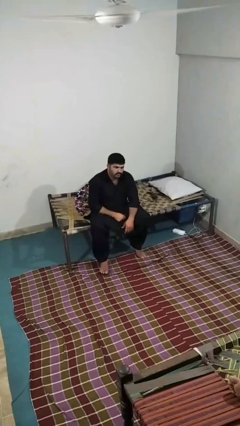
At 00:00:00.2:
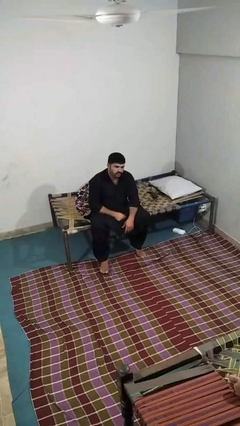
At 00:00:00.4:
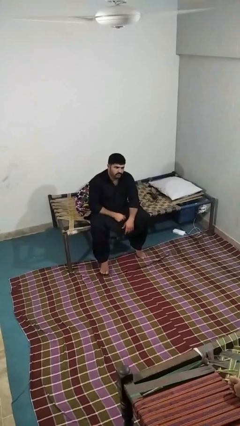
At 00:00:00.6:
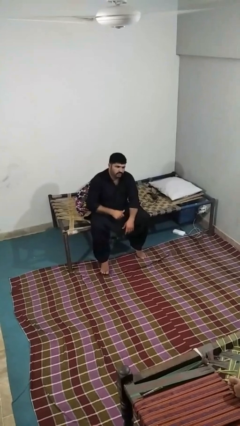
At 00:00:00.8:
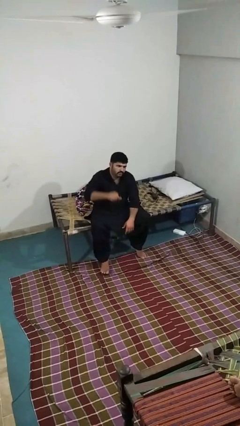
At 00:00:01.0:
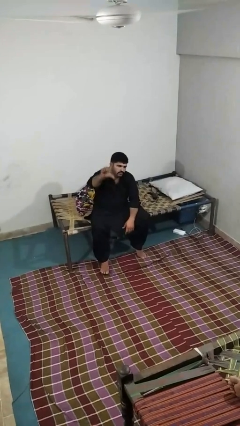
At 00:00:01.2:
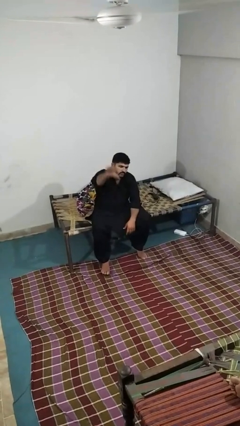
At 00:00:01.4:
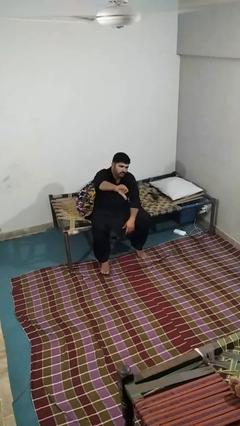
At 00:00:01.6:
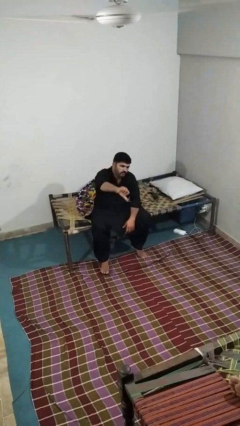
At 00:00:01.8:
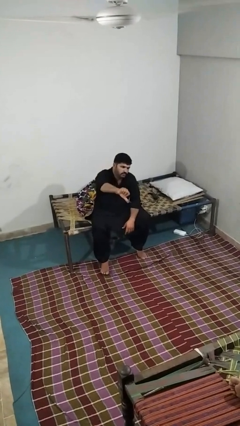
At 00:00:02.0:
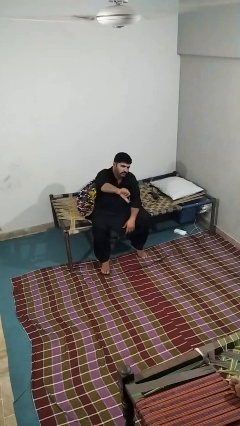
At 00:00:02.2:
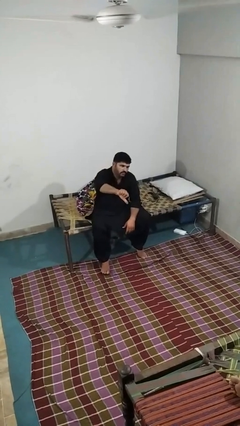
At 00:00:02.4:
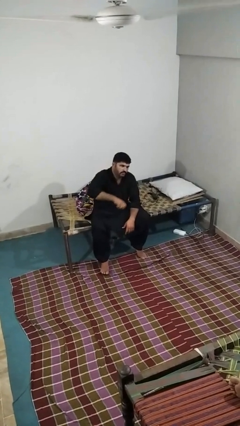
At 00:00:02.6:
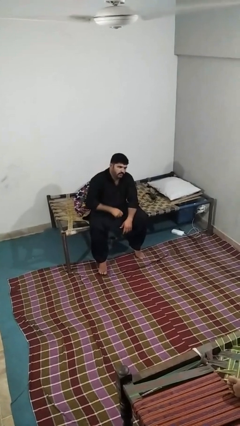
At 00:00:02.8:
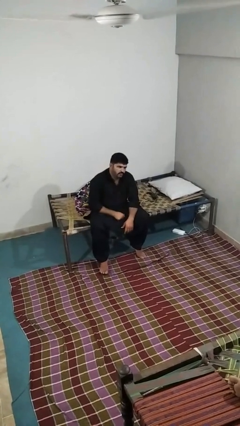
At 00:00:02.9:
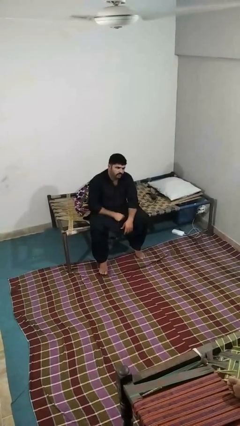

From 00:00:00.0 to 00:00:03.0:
person gestures thumbs down

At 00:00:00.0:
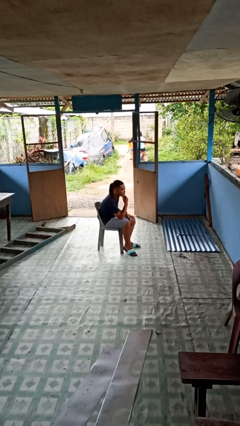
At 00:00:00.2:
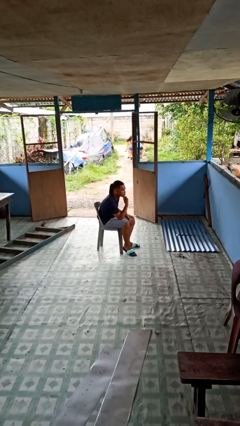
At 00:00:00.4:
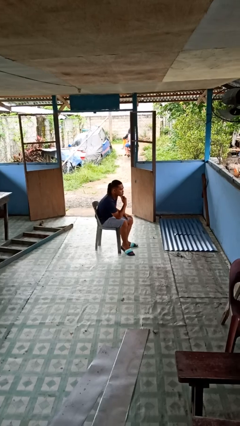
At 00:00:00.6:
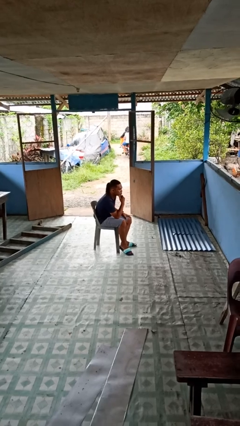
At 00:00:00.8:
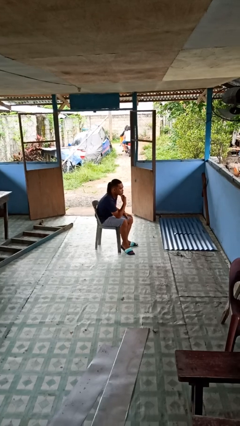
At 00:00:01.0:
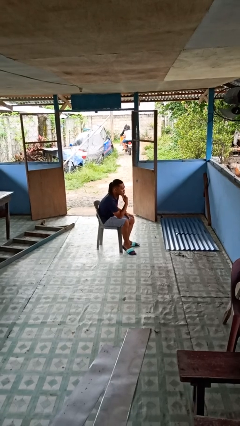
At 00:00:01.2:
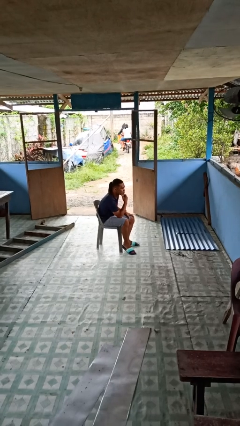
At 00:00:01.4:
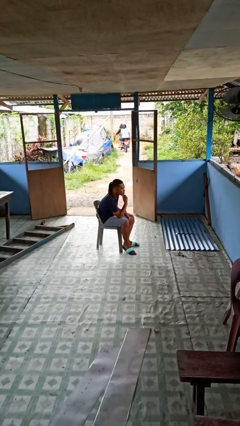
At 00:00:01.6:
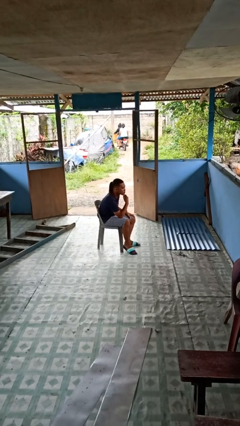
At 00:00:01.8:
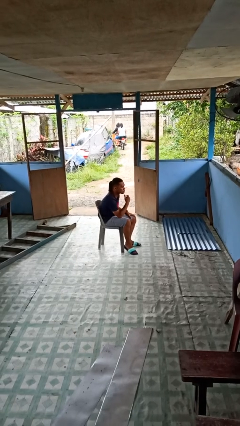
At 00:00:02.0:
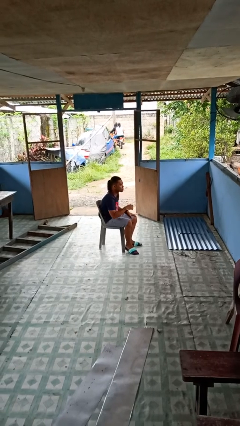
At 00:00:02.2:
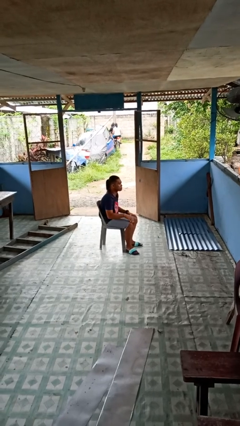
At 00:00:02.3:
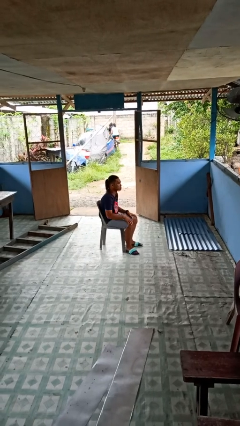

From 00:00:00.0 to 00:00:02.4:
person strokes chin

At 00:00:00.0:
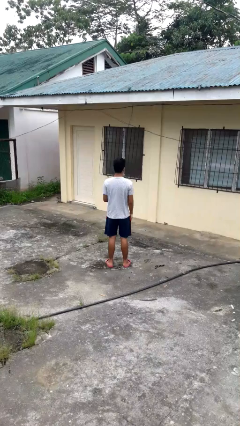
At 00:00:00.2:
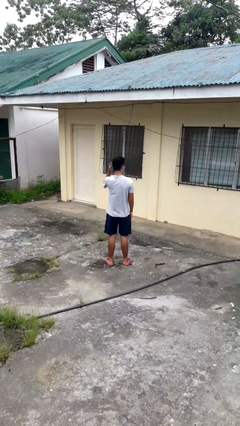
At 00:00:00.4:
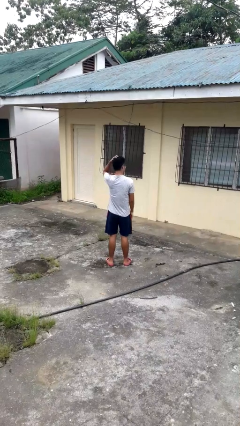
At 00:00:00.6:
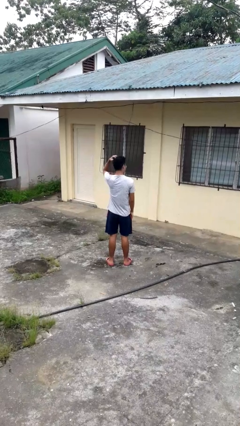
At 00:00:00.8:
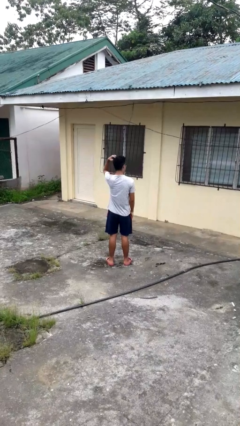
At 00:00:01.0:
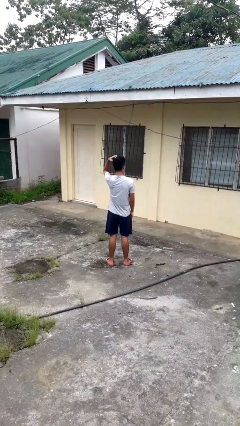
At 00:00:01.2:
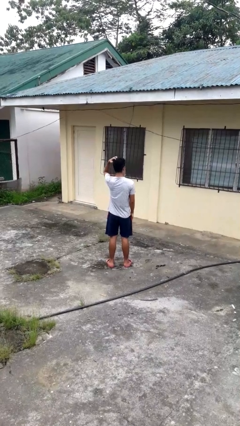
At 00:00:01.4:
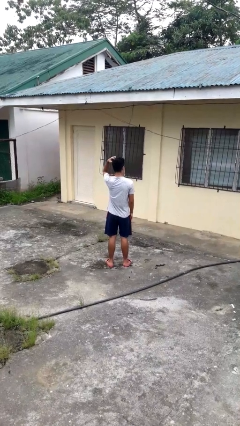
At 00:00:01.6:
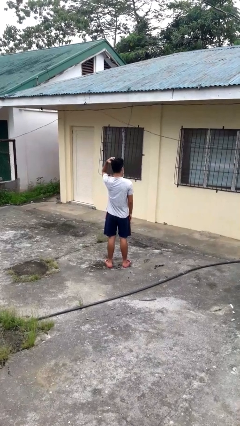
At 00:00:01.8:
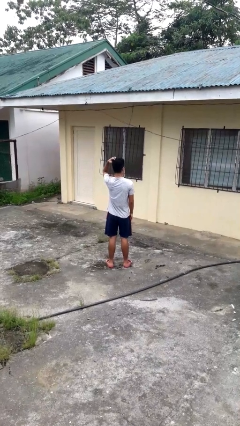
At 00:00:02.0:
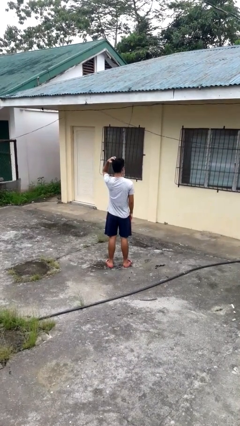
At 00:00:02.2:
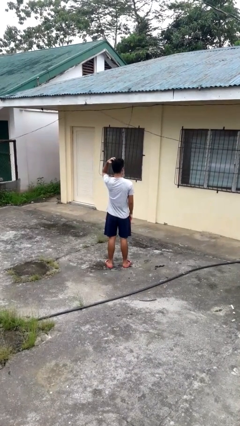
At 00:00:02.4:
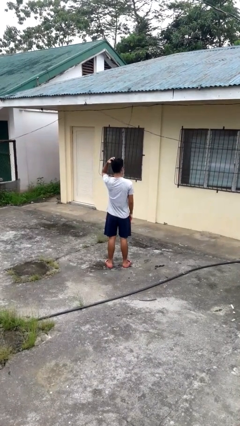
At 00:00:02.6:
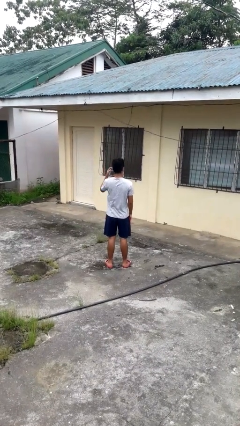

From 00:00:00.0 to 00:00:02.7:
person scratches face

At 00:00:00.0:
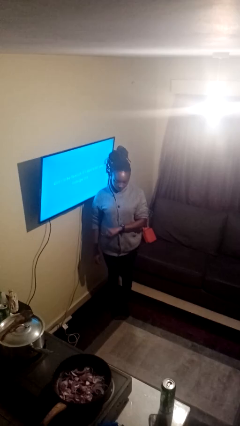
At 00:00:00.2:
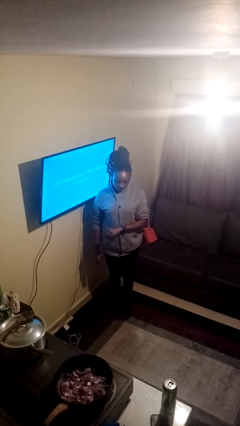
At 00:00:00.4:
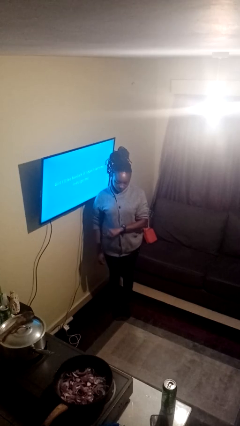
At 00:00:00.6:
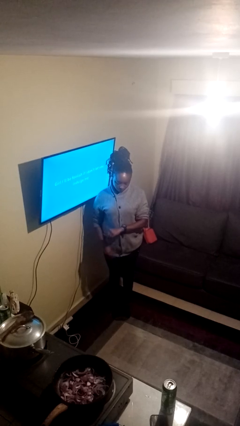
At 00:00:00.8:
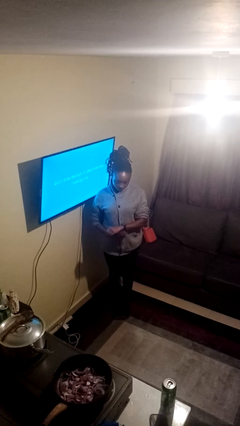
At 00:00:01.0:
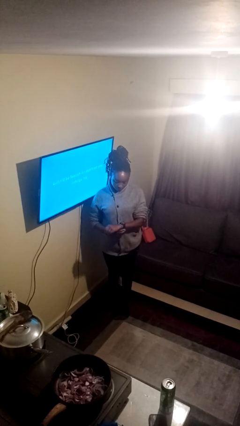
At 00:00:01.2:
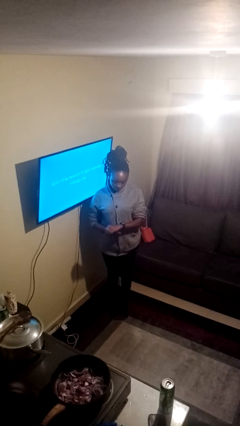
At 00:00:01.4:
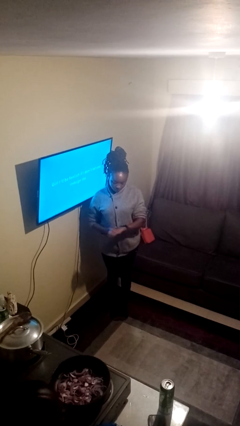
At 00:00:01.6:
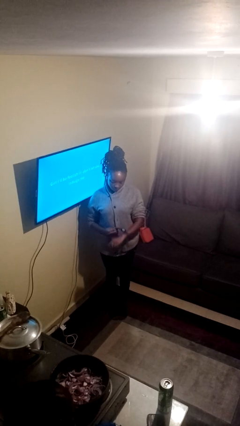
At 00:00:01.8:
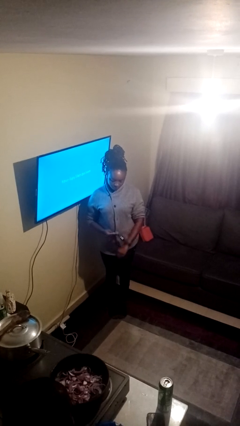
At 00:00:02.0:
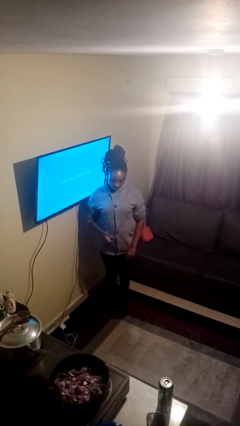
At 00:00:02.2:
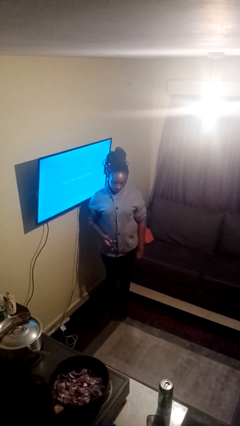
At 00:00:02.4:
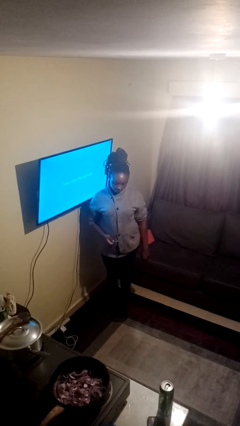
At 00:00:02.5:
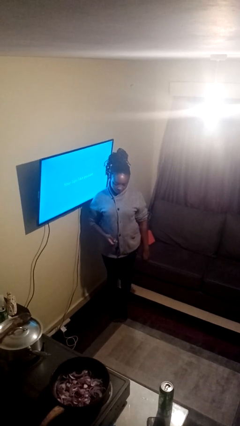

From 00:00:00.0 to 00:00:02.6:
person takes off wristwatch

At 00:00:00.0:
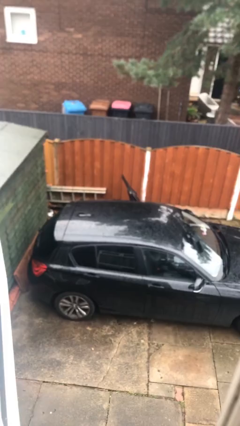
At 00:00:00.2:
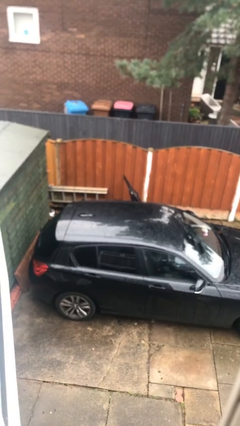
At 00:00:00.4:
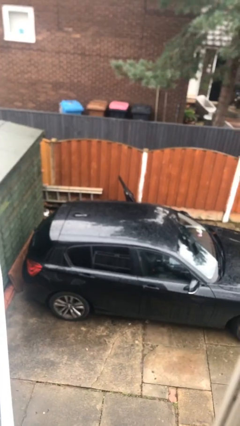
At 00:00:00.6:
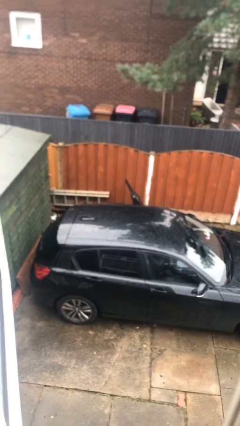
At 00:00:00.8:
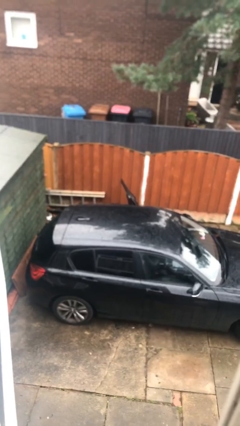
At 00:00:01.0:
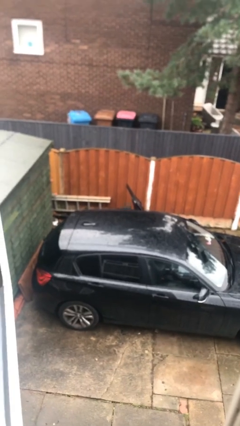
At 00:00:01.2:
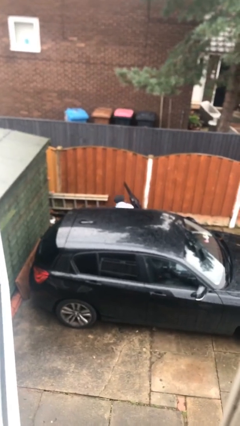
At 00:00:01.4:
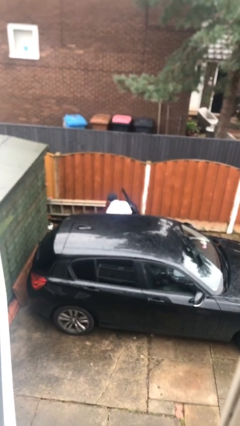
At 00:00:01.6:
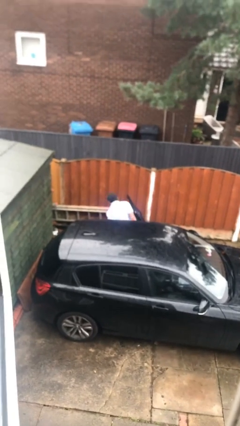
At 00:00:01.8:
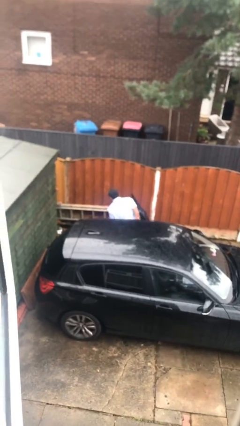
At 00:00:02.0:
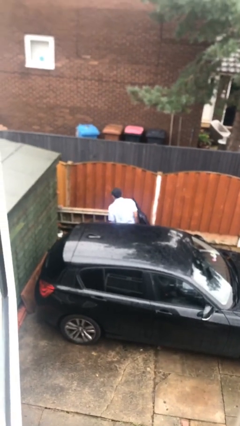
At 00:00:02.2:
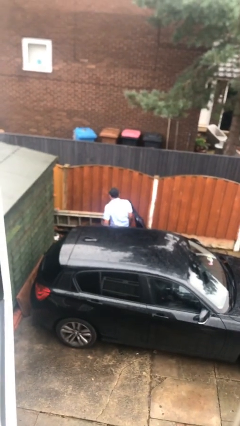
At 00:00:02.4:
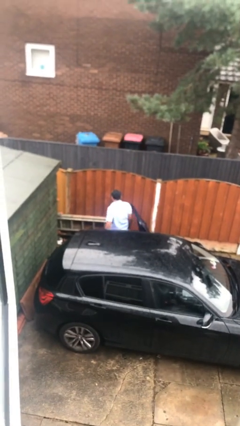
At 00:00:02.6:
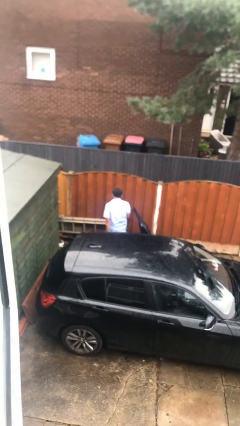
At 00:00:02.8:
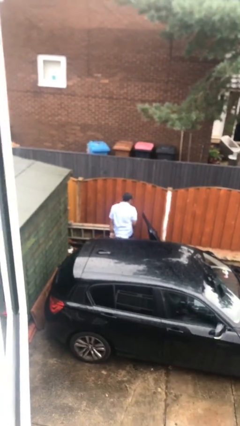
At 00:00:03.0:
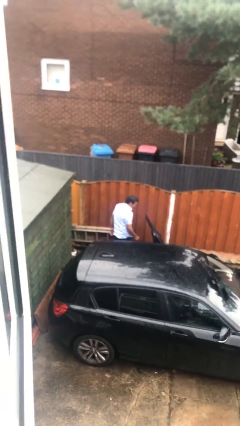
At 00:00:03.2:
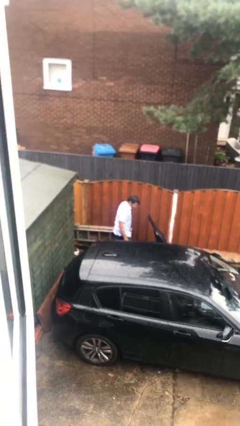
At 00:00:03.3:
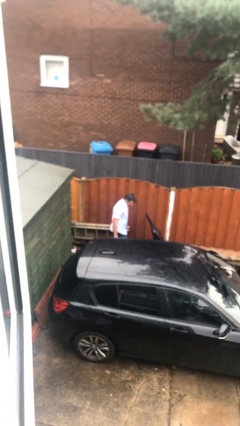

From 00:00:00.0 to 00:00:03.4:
person exits car

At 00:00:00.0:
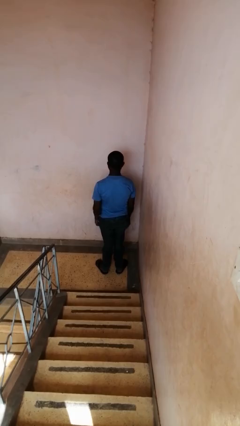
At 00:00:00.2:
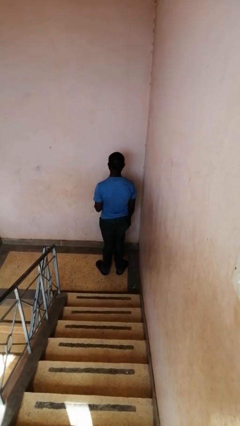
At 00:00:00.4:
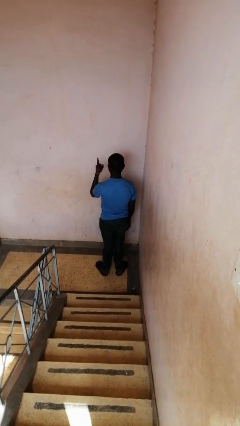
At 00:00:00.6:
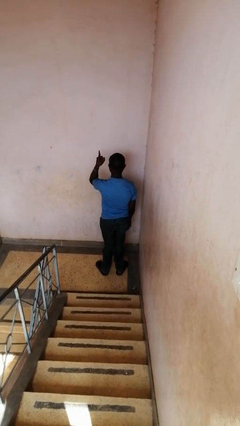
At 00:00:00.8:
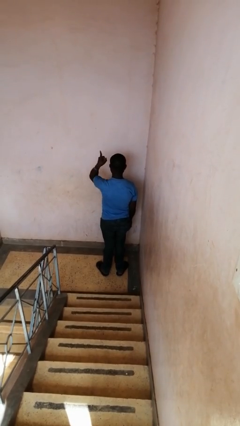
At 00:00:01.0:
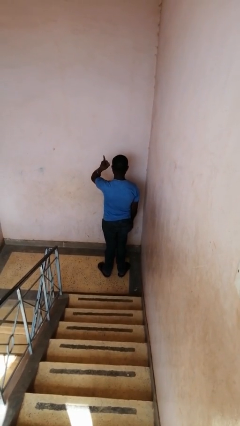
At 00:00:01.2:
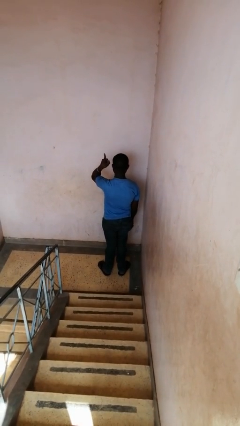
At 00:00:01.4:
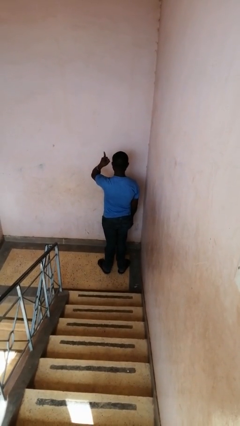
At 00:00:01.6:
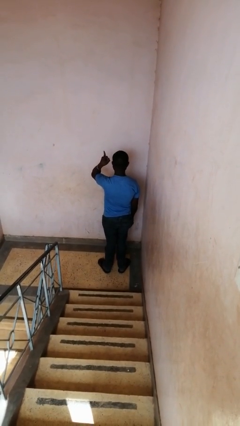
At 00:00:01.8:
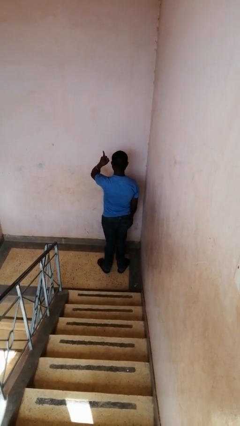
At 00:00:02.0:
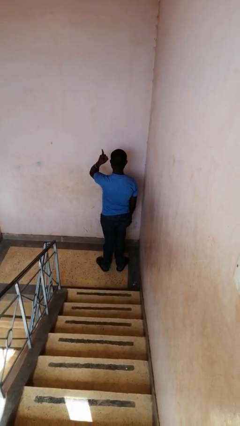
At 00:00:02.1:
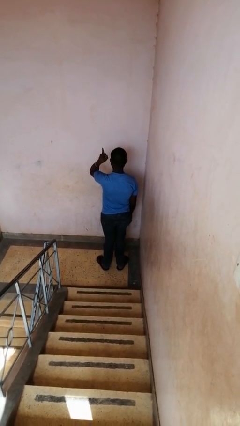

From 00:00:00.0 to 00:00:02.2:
person gestures number one

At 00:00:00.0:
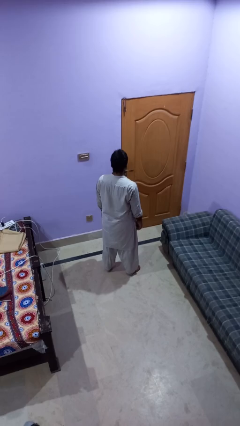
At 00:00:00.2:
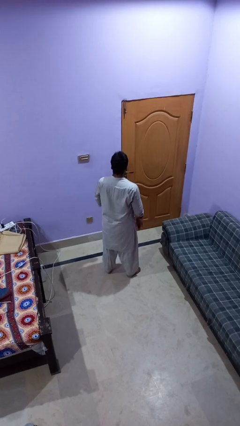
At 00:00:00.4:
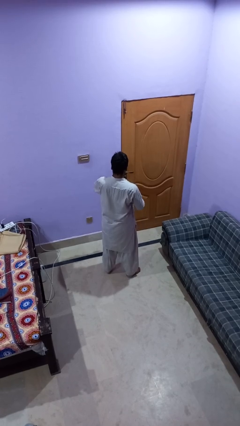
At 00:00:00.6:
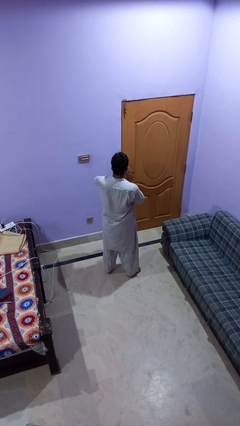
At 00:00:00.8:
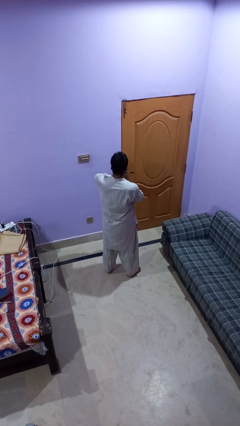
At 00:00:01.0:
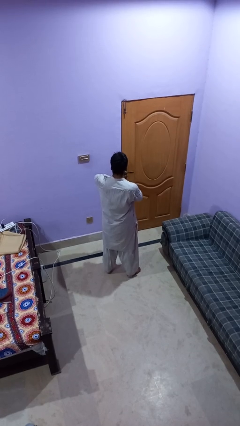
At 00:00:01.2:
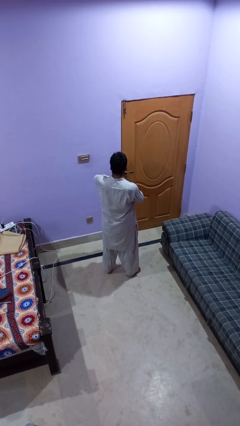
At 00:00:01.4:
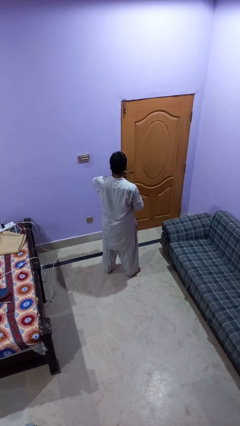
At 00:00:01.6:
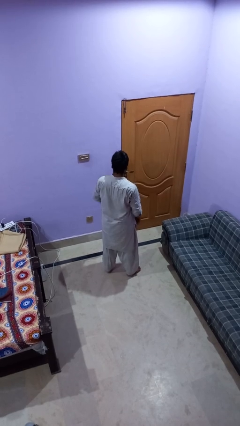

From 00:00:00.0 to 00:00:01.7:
person swats bug
